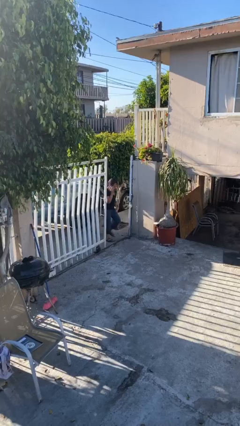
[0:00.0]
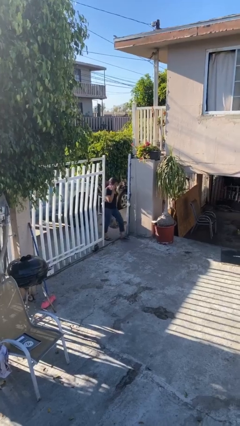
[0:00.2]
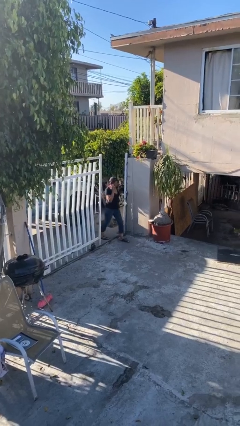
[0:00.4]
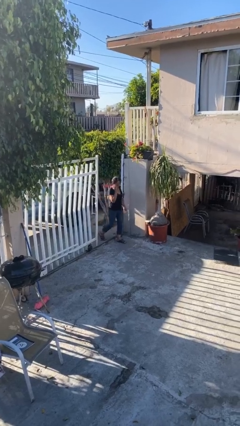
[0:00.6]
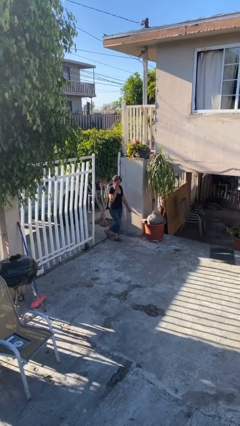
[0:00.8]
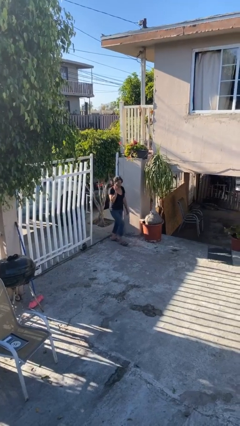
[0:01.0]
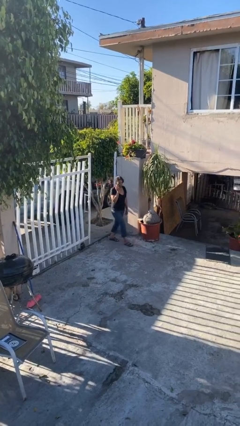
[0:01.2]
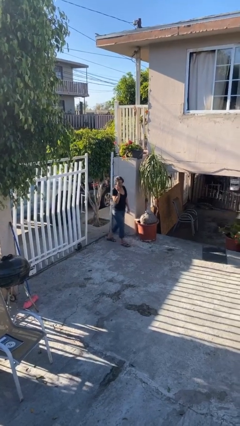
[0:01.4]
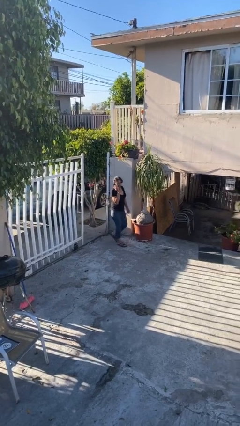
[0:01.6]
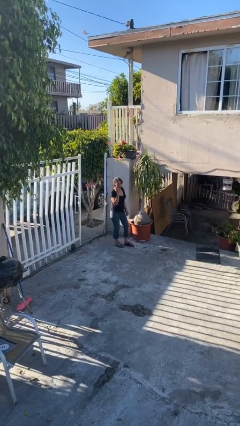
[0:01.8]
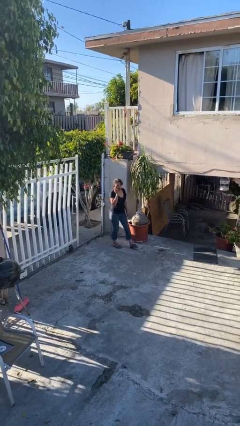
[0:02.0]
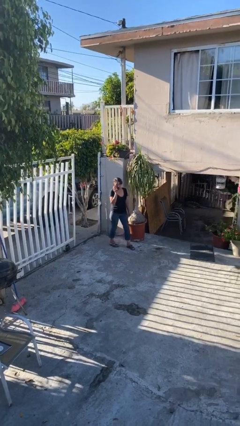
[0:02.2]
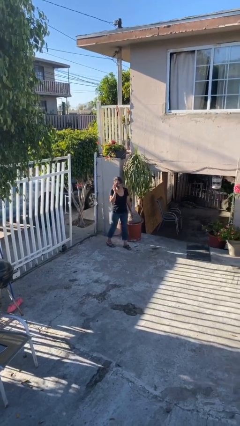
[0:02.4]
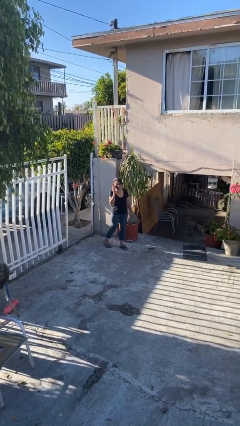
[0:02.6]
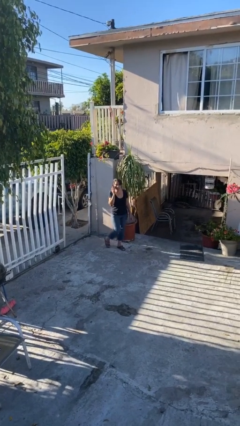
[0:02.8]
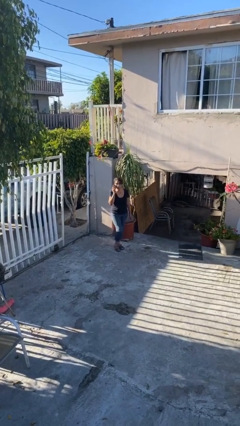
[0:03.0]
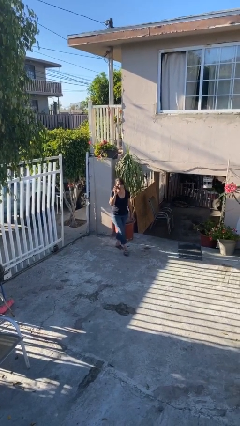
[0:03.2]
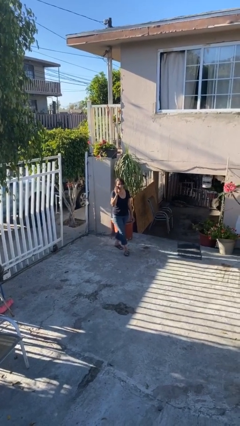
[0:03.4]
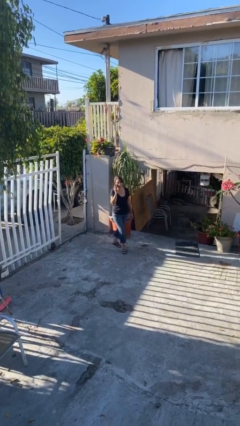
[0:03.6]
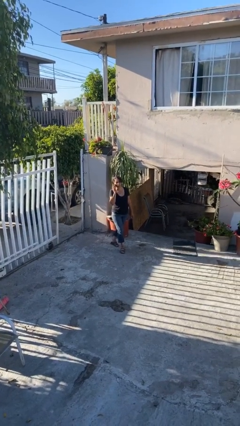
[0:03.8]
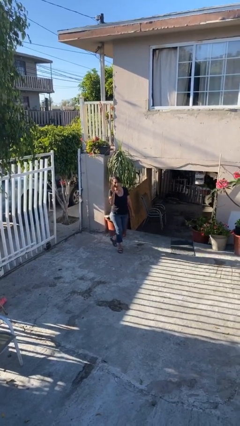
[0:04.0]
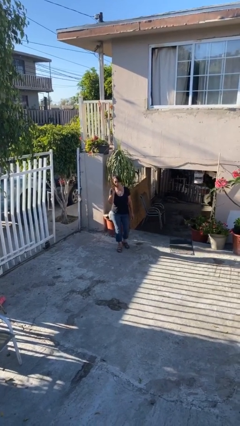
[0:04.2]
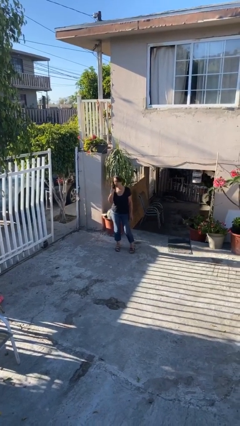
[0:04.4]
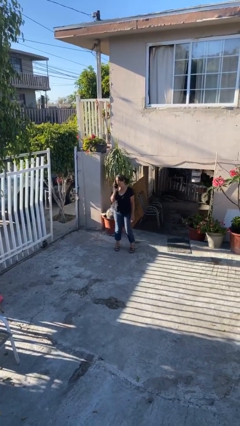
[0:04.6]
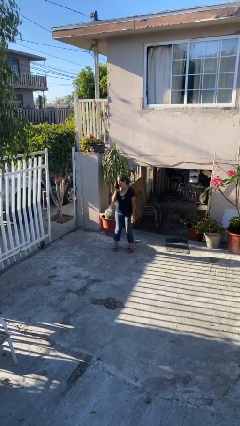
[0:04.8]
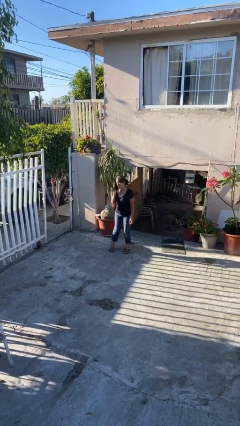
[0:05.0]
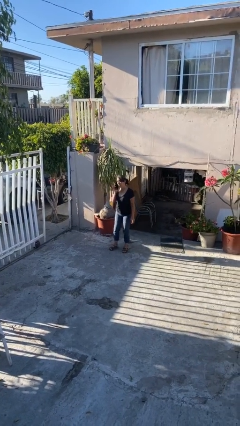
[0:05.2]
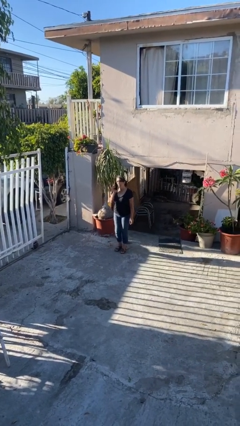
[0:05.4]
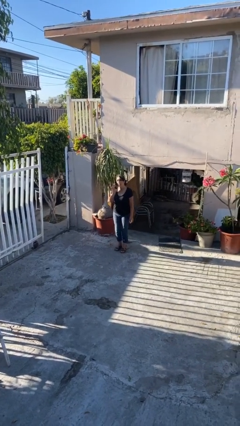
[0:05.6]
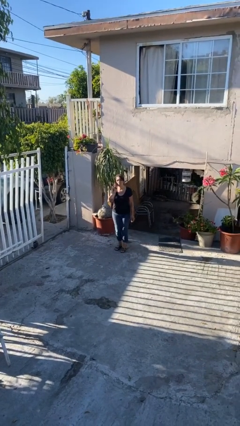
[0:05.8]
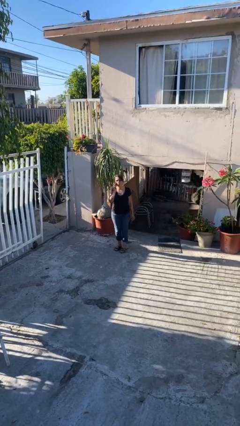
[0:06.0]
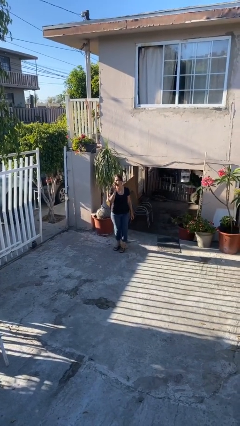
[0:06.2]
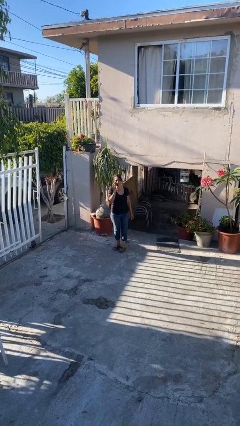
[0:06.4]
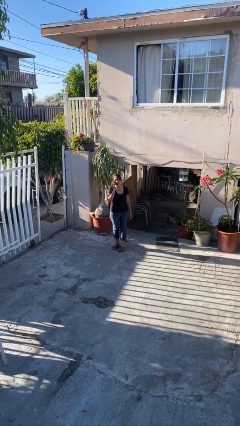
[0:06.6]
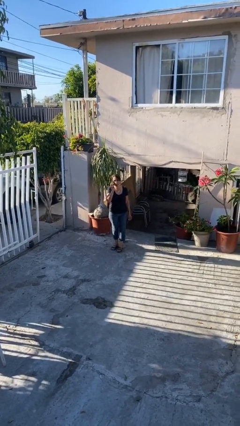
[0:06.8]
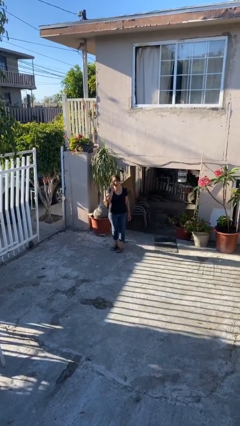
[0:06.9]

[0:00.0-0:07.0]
person enters scene through structure

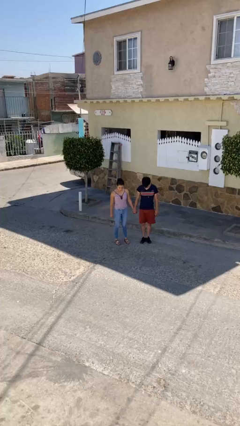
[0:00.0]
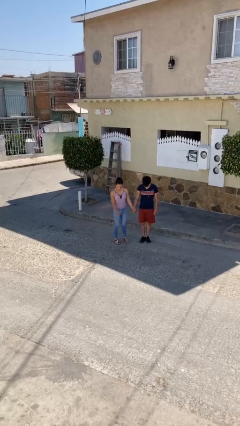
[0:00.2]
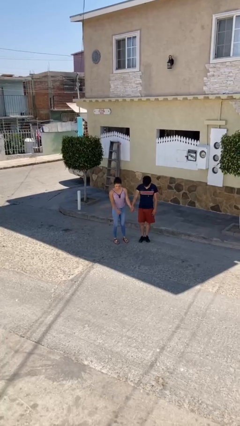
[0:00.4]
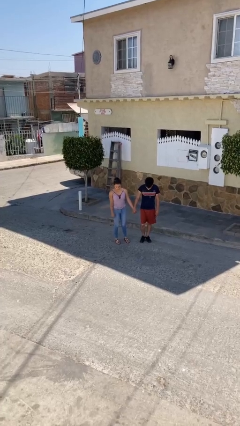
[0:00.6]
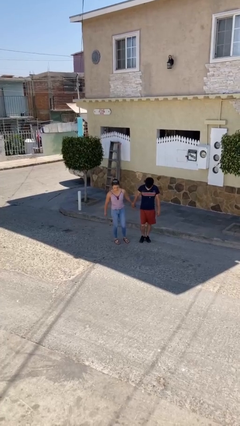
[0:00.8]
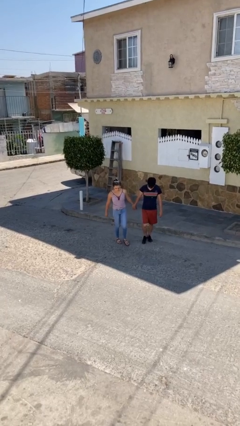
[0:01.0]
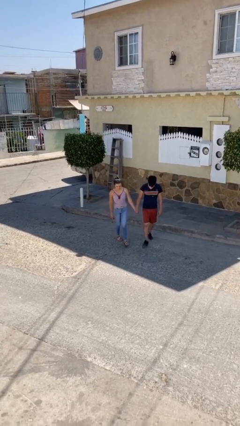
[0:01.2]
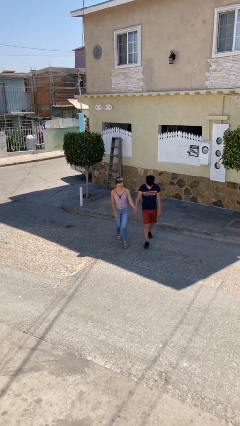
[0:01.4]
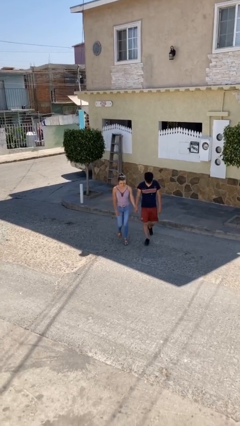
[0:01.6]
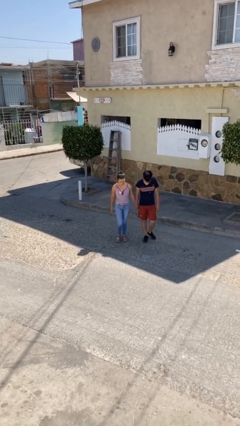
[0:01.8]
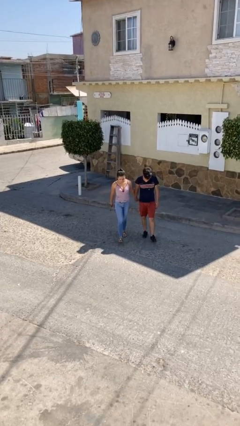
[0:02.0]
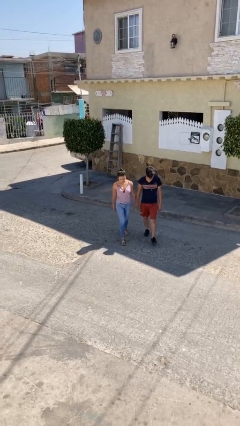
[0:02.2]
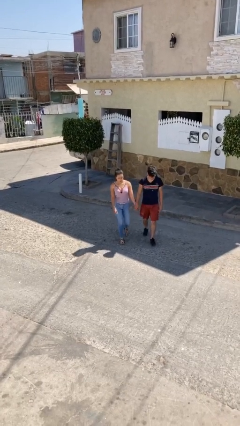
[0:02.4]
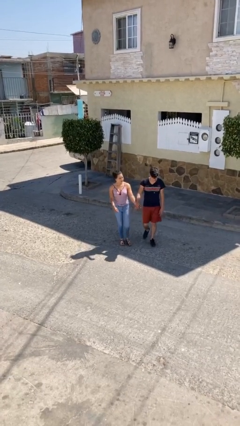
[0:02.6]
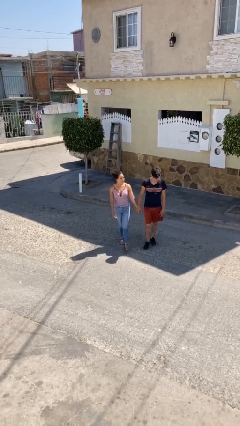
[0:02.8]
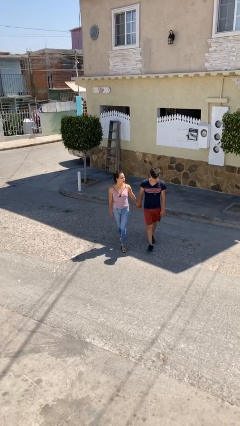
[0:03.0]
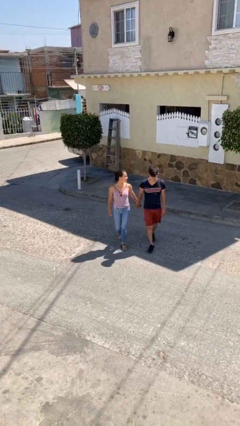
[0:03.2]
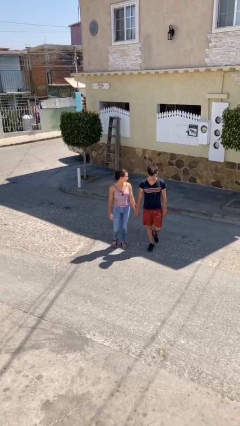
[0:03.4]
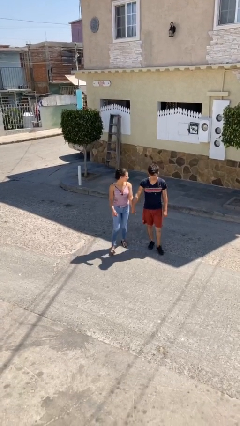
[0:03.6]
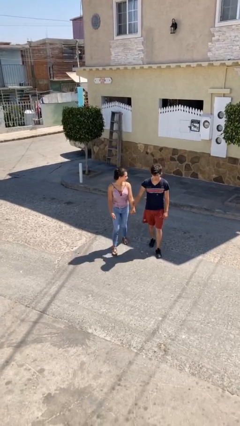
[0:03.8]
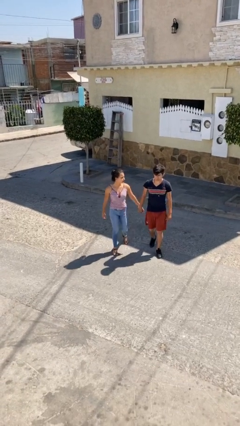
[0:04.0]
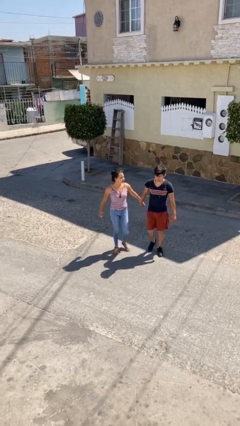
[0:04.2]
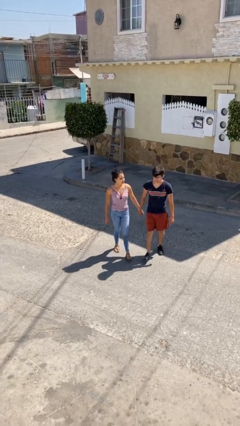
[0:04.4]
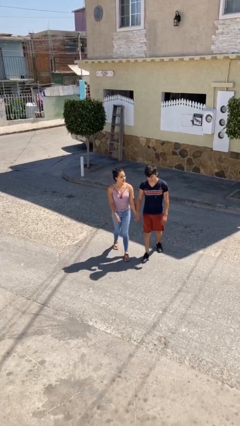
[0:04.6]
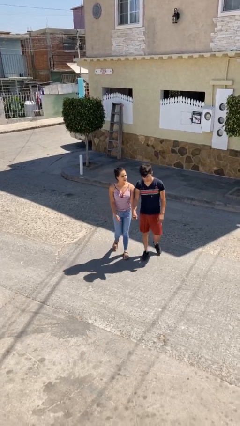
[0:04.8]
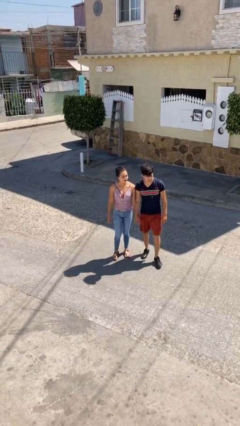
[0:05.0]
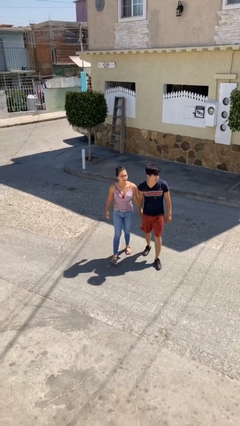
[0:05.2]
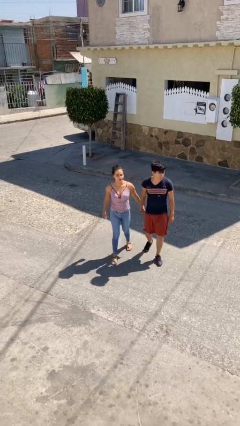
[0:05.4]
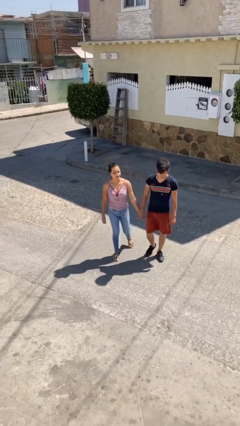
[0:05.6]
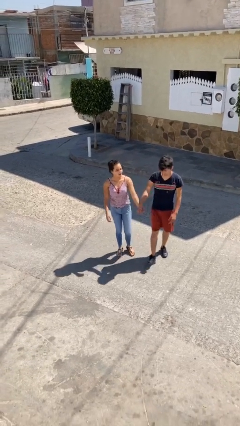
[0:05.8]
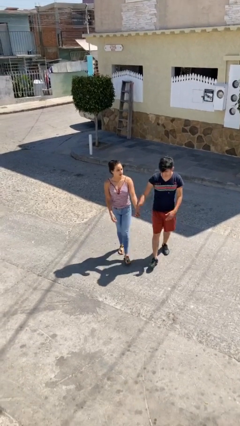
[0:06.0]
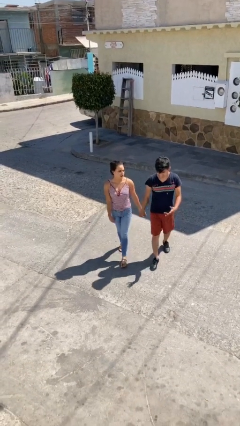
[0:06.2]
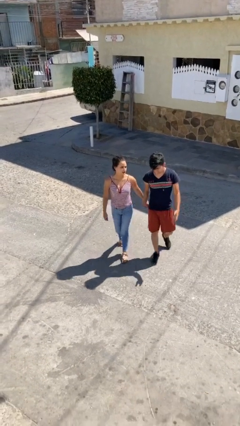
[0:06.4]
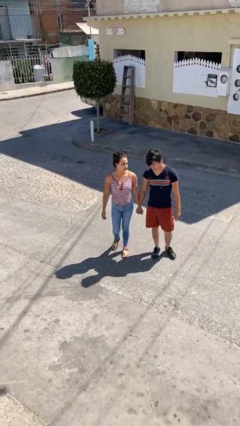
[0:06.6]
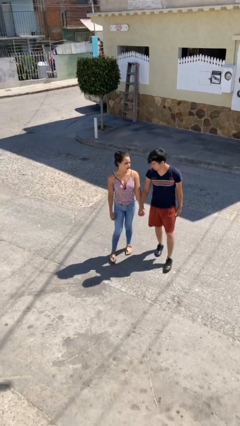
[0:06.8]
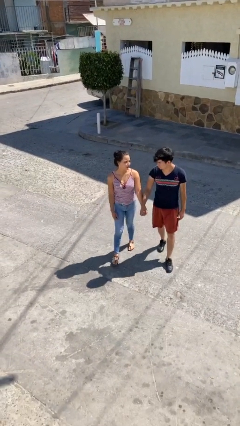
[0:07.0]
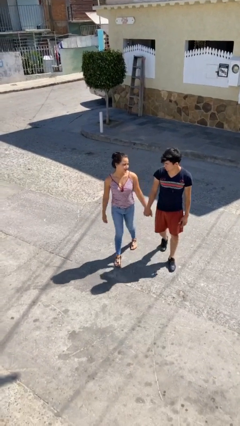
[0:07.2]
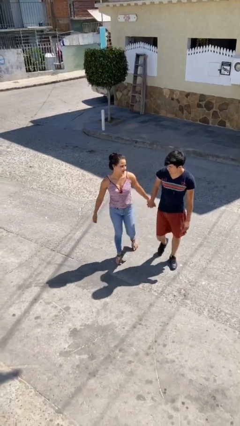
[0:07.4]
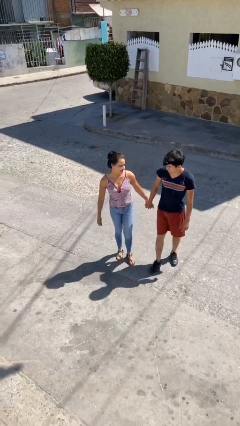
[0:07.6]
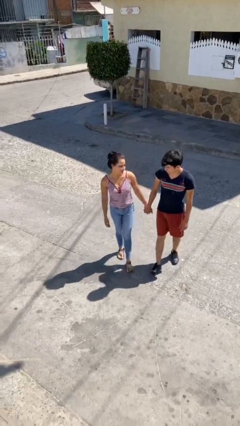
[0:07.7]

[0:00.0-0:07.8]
person holds hand

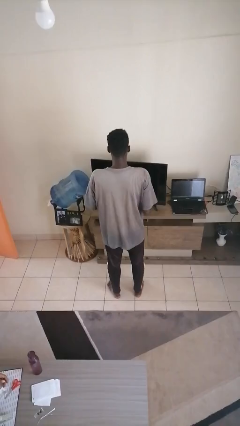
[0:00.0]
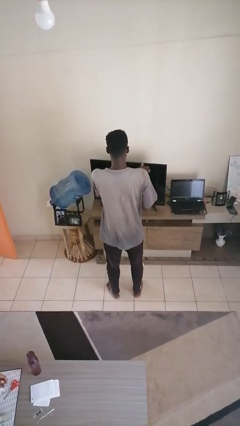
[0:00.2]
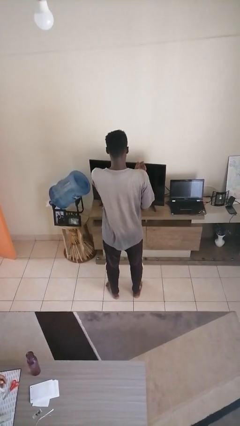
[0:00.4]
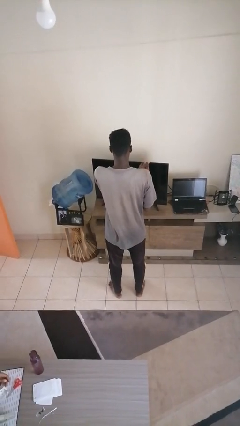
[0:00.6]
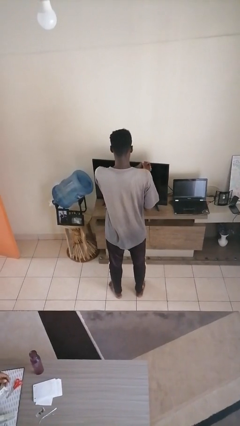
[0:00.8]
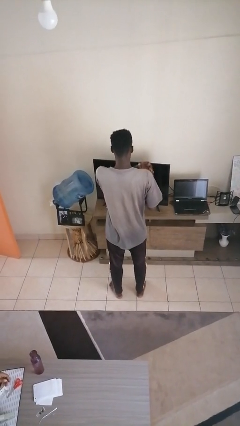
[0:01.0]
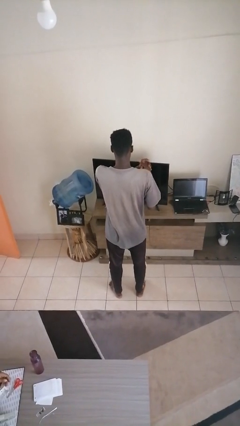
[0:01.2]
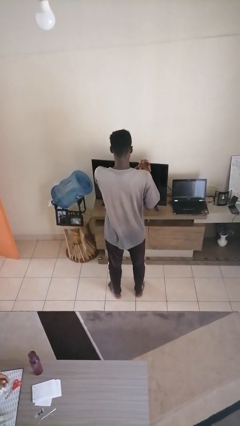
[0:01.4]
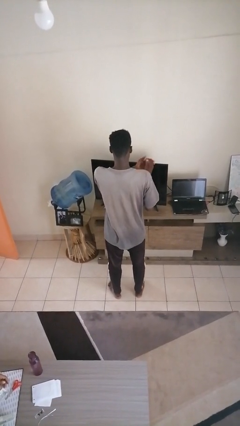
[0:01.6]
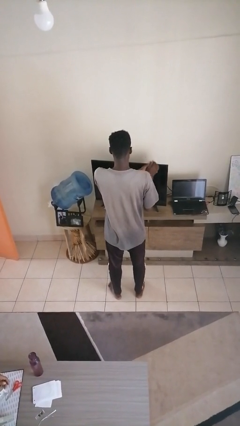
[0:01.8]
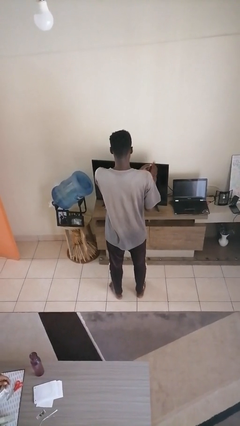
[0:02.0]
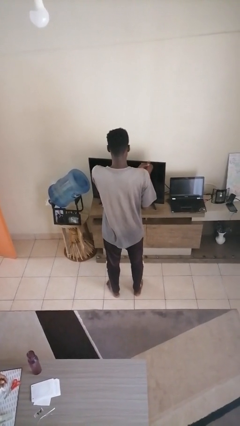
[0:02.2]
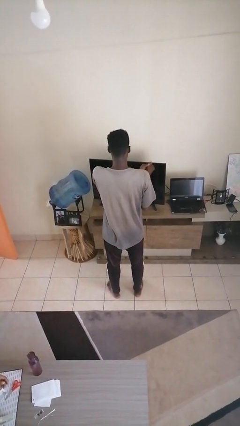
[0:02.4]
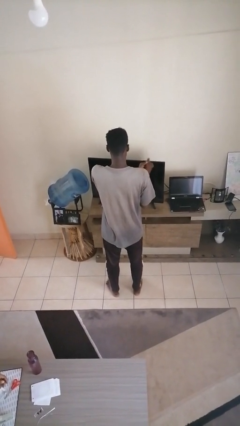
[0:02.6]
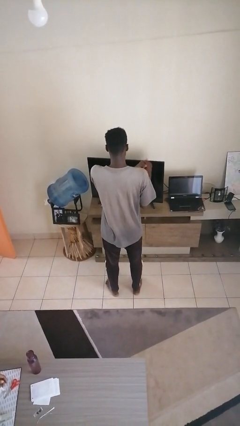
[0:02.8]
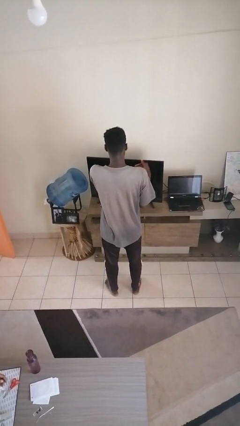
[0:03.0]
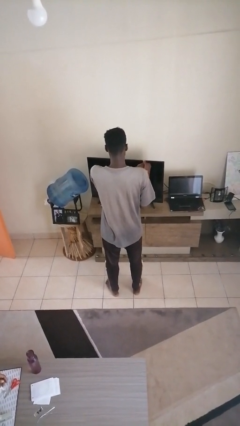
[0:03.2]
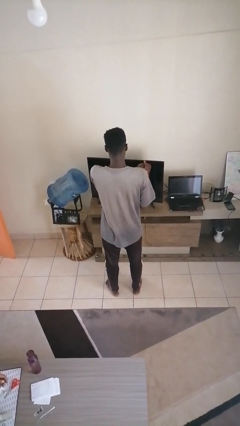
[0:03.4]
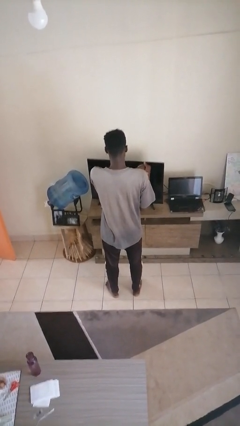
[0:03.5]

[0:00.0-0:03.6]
person cracks knuckles
